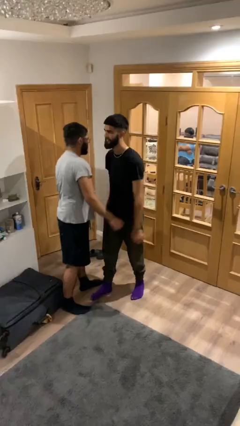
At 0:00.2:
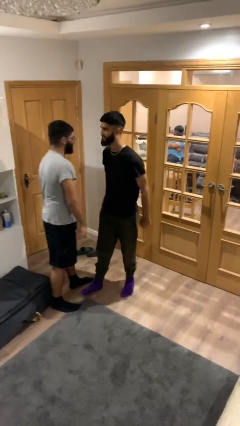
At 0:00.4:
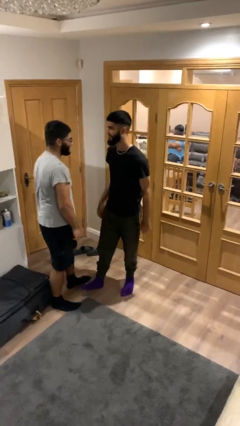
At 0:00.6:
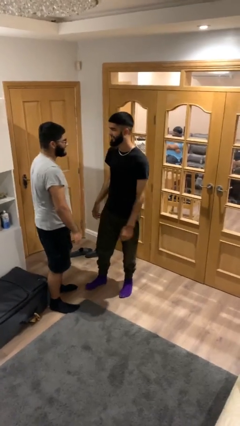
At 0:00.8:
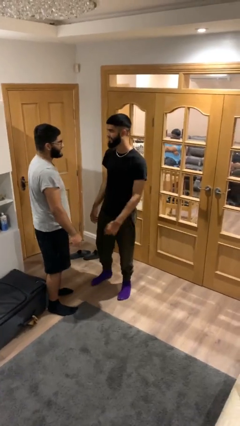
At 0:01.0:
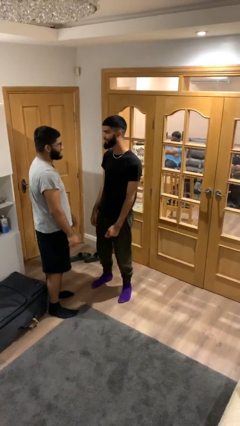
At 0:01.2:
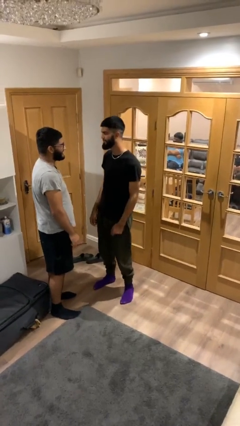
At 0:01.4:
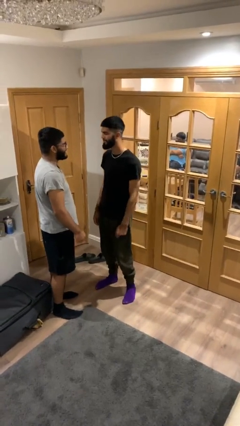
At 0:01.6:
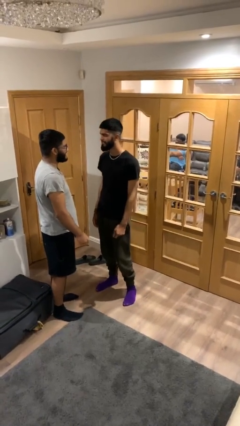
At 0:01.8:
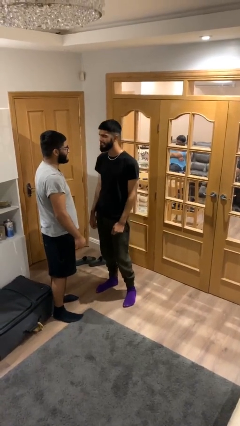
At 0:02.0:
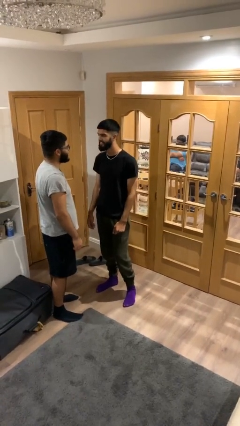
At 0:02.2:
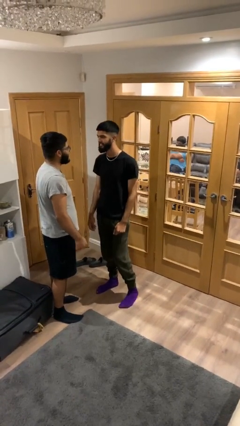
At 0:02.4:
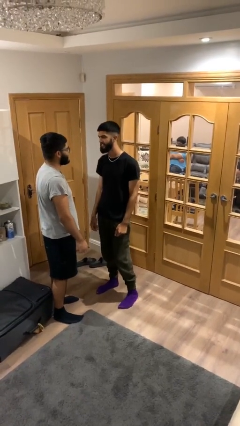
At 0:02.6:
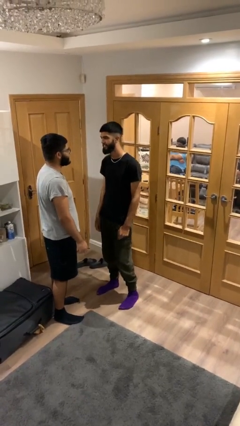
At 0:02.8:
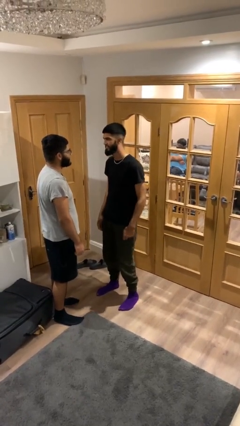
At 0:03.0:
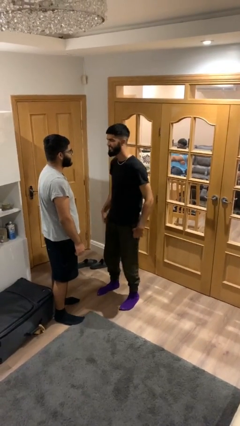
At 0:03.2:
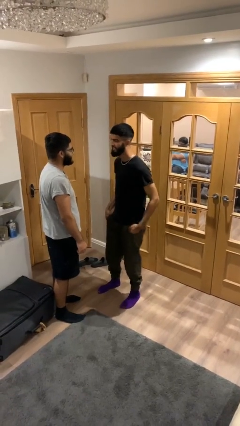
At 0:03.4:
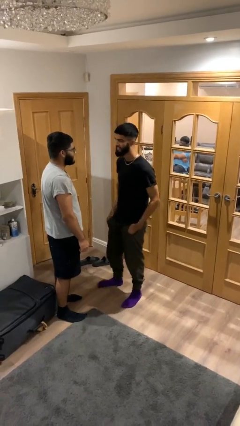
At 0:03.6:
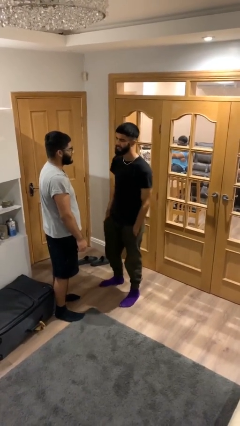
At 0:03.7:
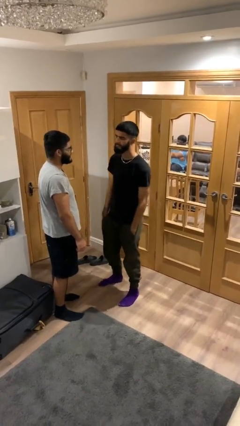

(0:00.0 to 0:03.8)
person talks to person

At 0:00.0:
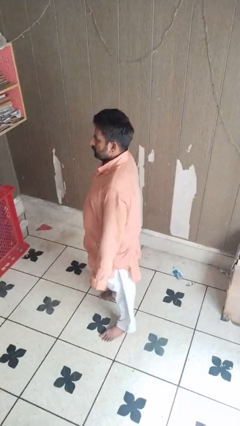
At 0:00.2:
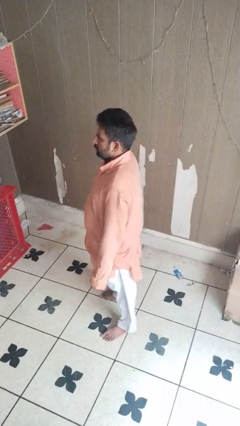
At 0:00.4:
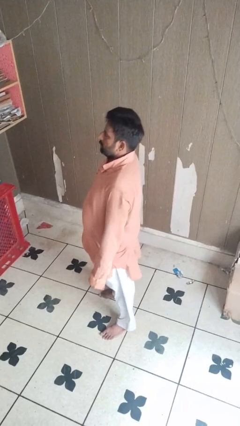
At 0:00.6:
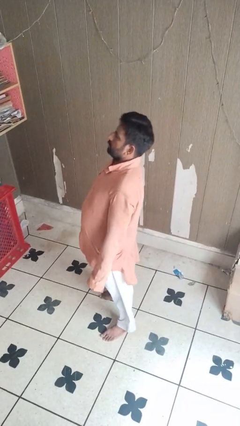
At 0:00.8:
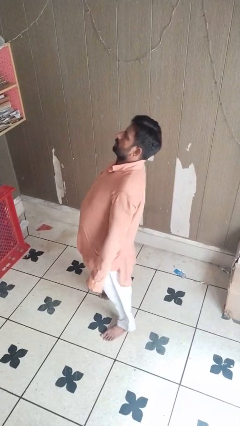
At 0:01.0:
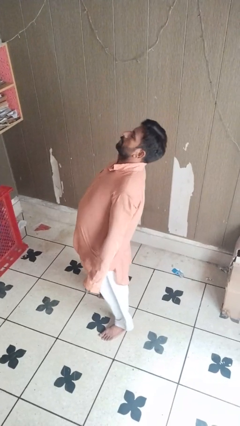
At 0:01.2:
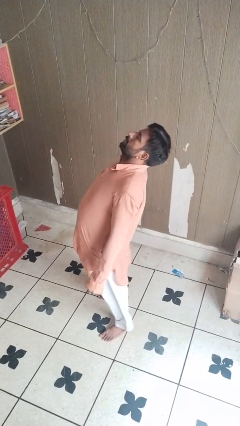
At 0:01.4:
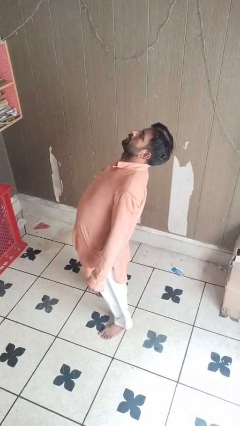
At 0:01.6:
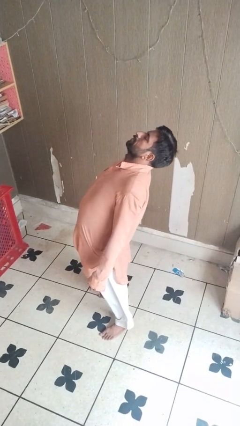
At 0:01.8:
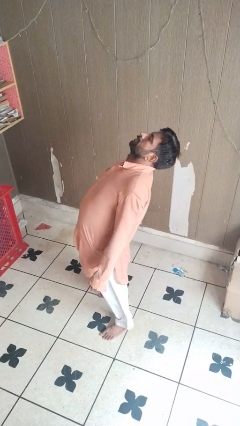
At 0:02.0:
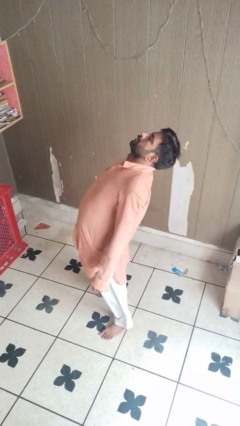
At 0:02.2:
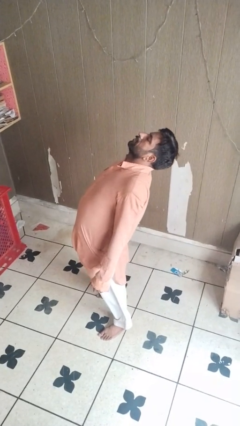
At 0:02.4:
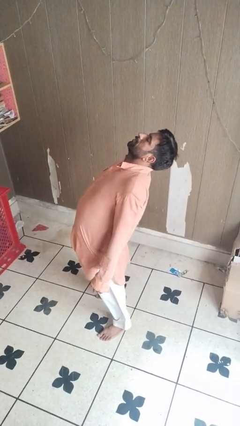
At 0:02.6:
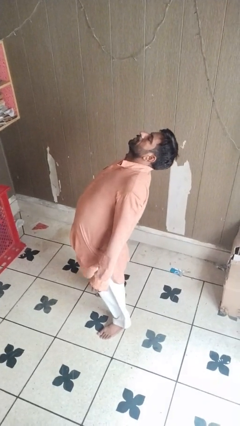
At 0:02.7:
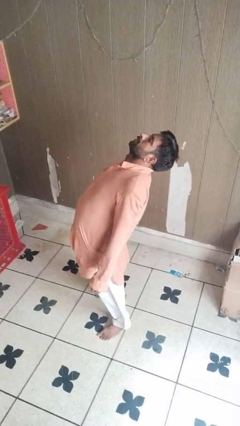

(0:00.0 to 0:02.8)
person stretches back

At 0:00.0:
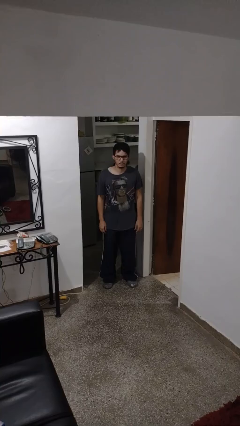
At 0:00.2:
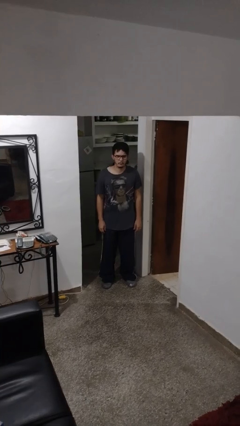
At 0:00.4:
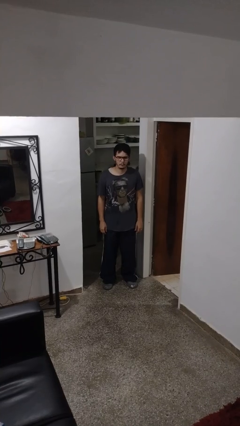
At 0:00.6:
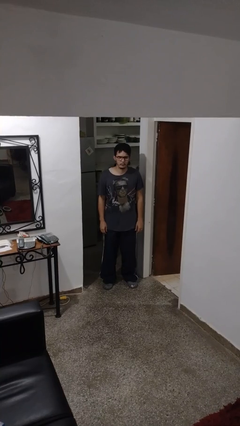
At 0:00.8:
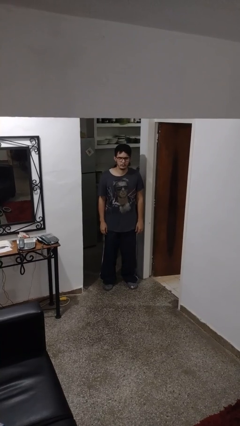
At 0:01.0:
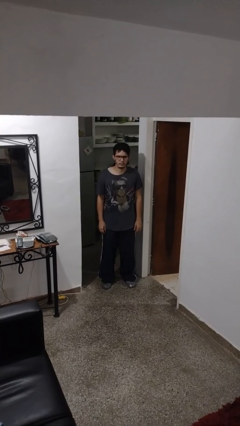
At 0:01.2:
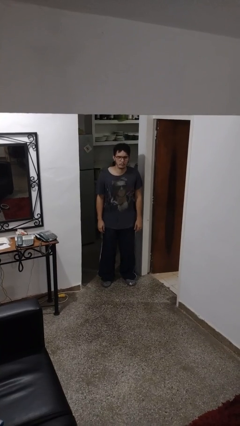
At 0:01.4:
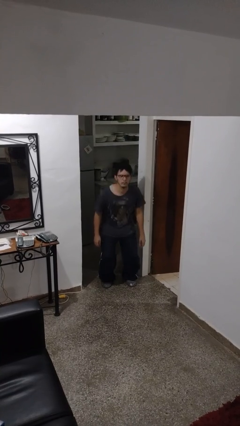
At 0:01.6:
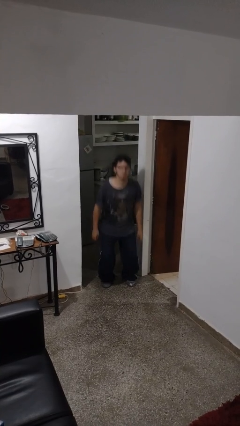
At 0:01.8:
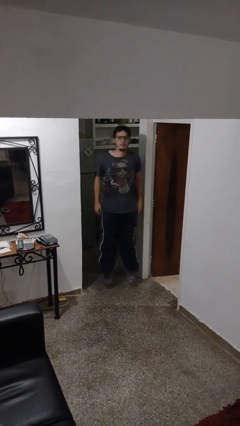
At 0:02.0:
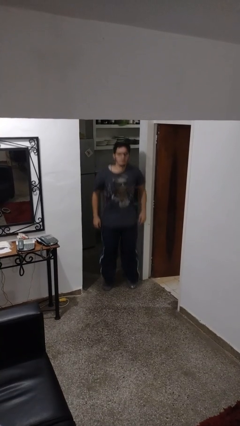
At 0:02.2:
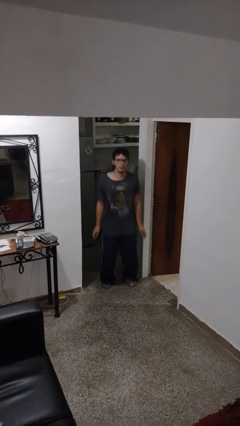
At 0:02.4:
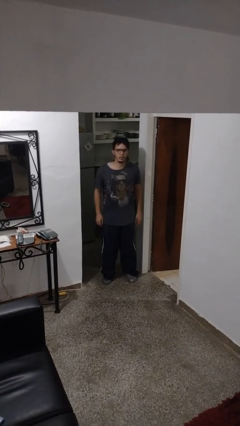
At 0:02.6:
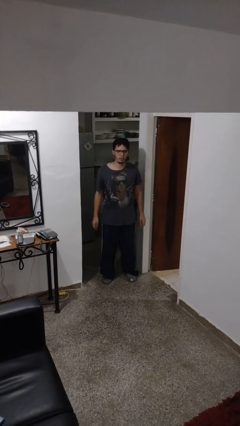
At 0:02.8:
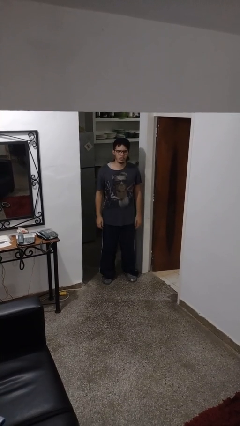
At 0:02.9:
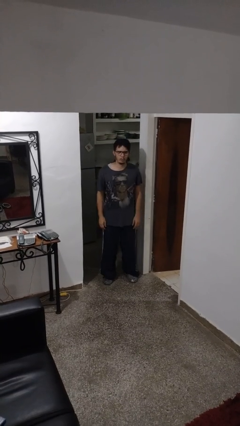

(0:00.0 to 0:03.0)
person jumps

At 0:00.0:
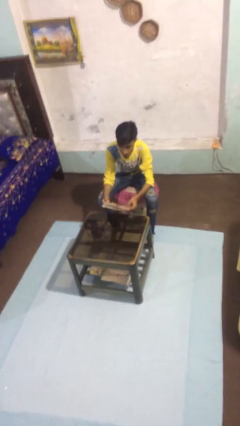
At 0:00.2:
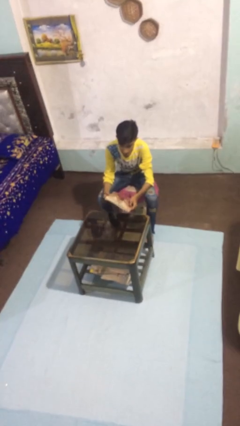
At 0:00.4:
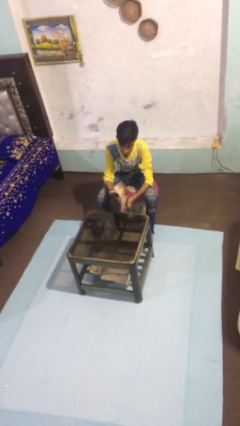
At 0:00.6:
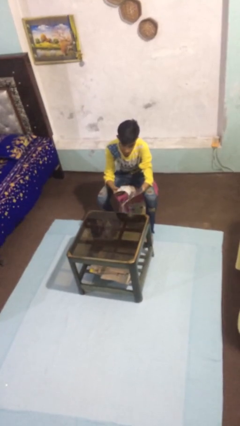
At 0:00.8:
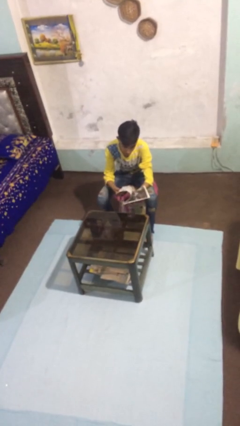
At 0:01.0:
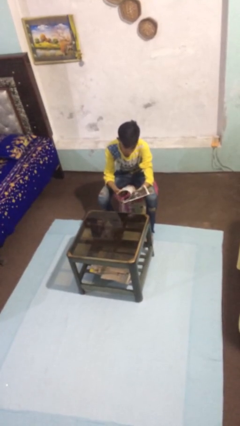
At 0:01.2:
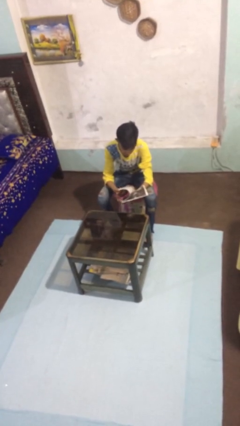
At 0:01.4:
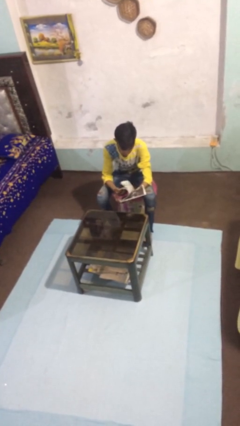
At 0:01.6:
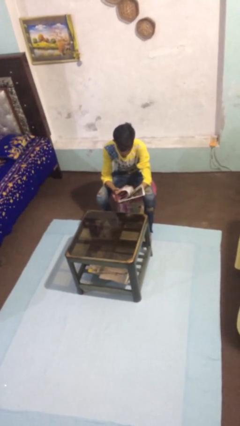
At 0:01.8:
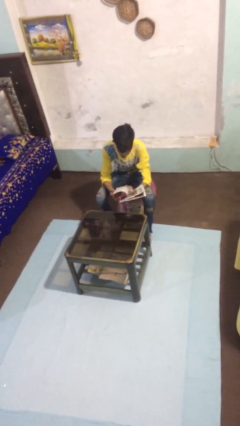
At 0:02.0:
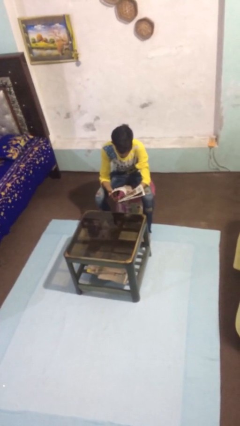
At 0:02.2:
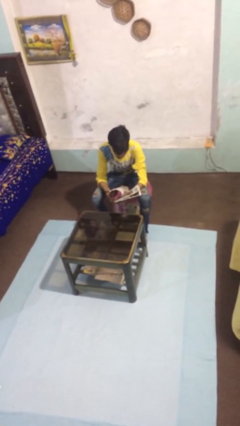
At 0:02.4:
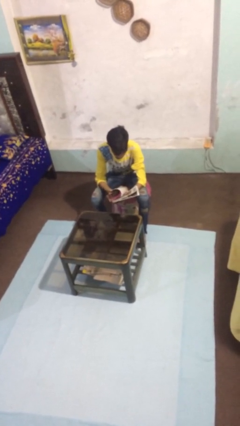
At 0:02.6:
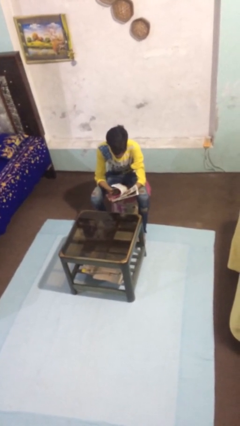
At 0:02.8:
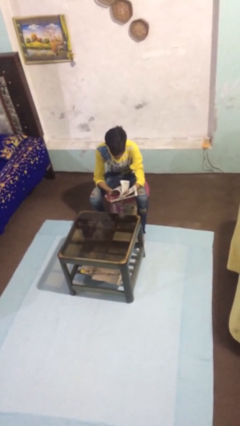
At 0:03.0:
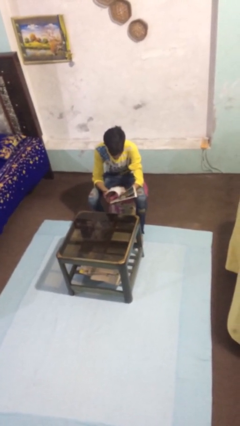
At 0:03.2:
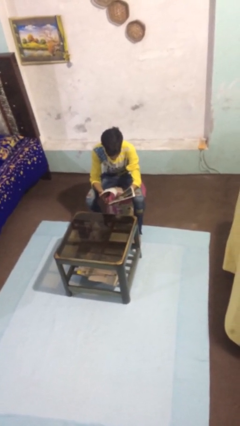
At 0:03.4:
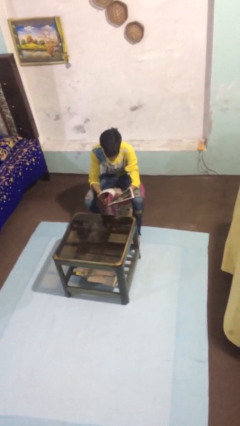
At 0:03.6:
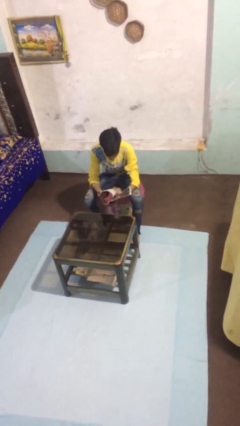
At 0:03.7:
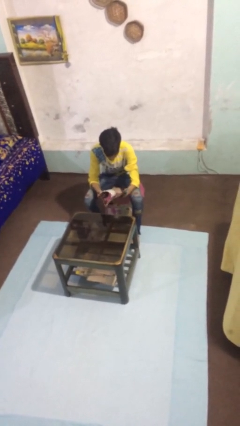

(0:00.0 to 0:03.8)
person reads document

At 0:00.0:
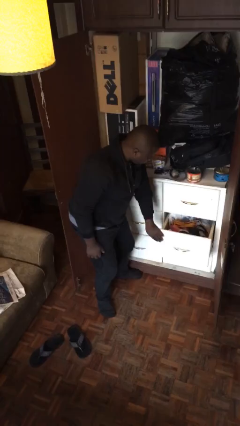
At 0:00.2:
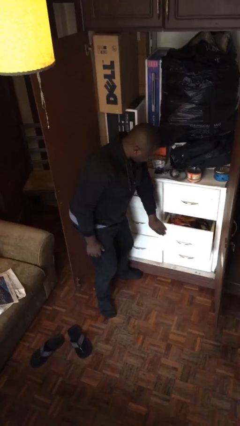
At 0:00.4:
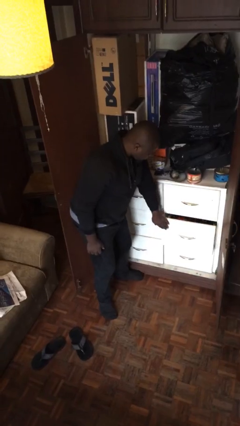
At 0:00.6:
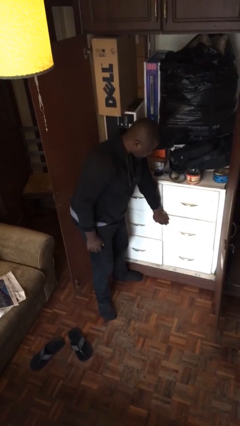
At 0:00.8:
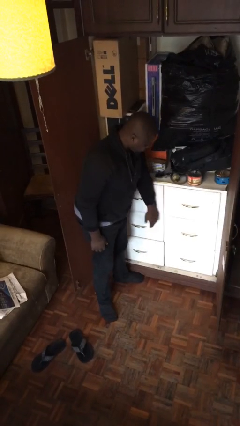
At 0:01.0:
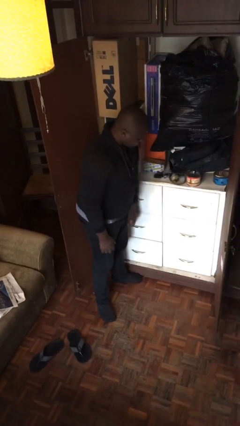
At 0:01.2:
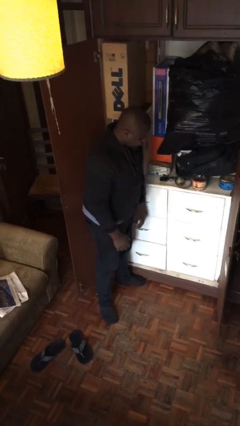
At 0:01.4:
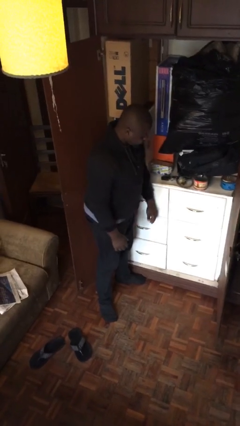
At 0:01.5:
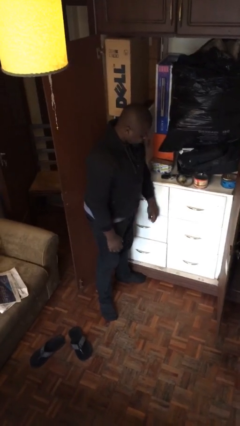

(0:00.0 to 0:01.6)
person closes dresser drawer

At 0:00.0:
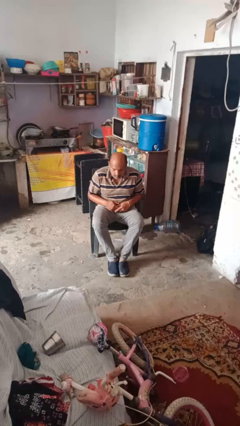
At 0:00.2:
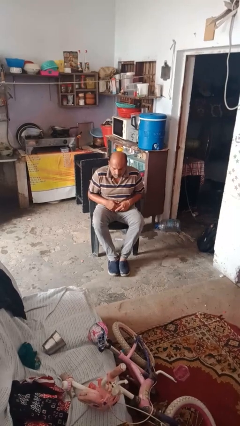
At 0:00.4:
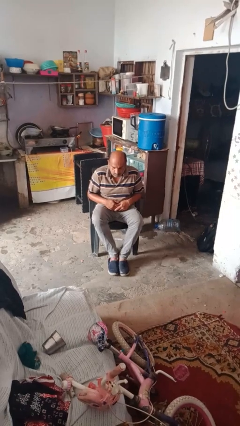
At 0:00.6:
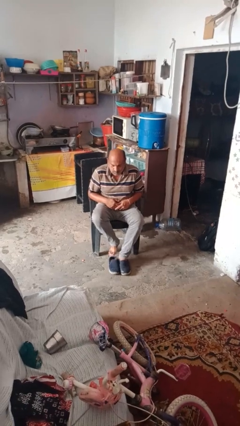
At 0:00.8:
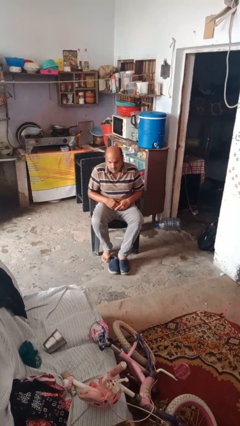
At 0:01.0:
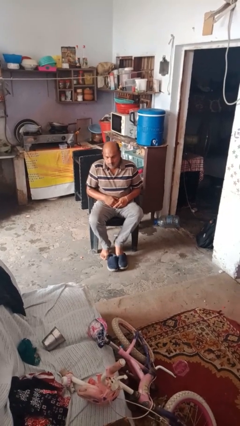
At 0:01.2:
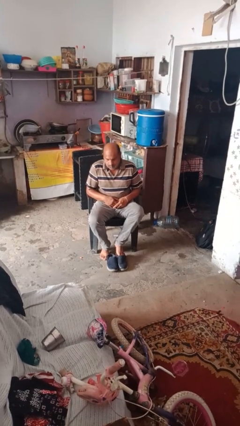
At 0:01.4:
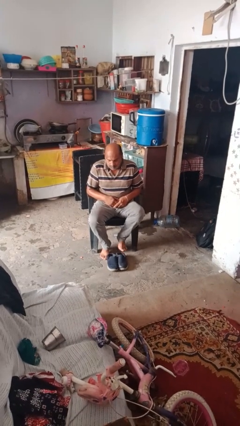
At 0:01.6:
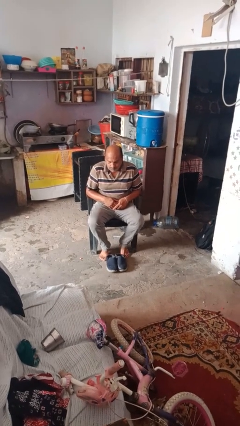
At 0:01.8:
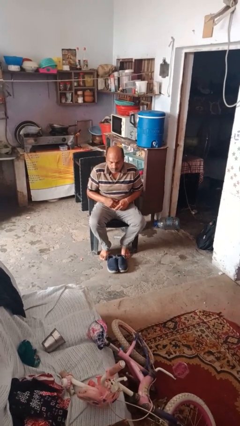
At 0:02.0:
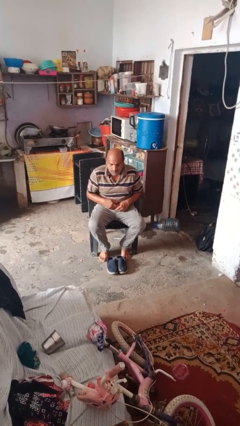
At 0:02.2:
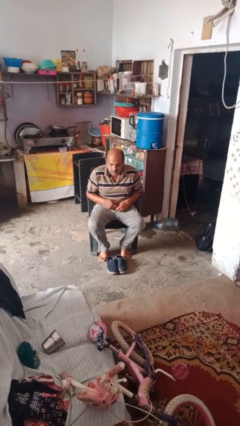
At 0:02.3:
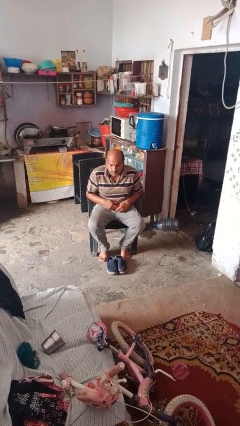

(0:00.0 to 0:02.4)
person takes off shoes
